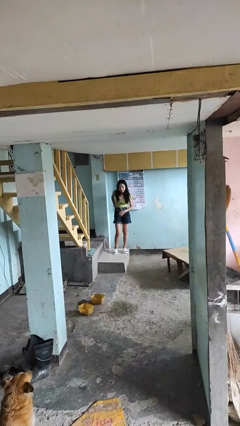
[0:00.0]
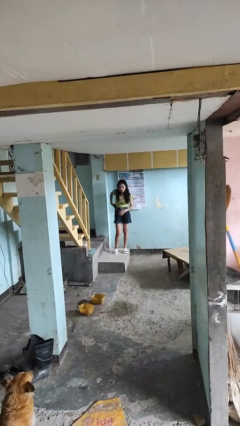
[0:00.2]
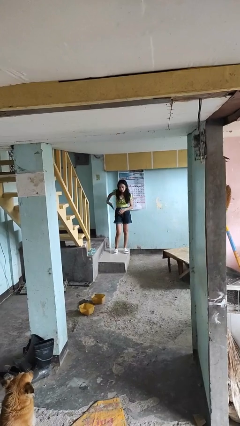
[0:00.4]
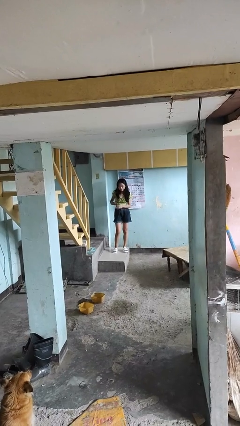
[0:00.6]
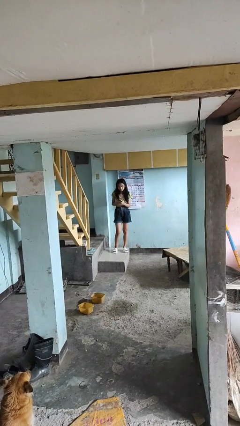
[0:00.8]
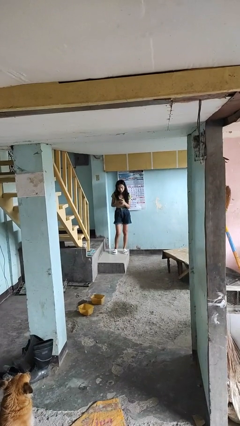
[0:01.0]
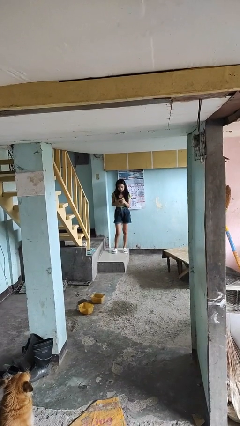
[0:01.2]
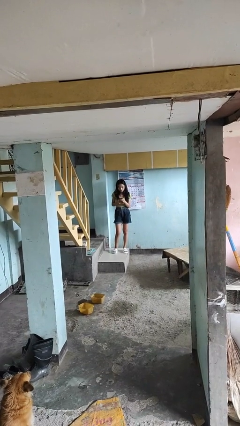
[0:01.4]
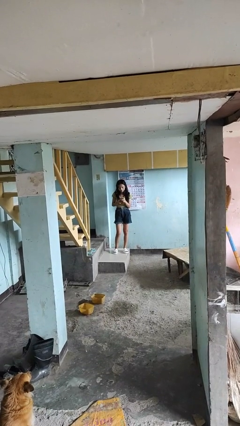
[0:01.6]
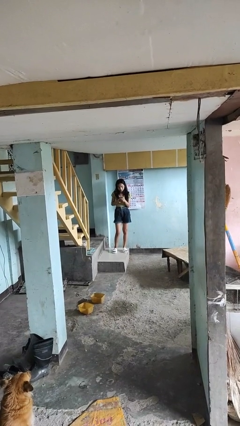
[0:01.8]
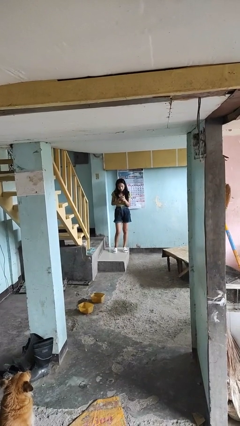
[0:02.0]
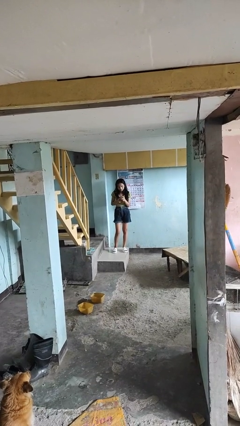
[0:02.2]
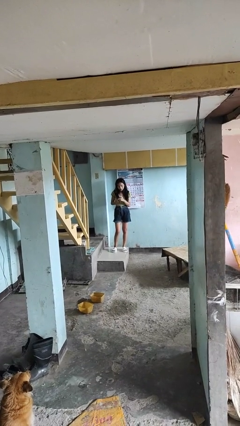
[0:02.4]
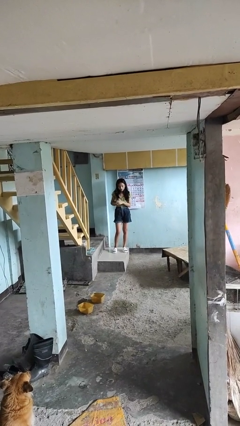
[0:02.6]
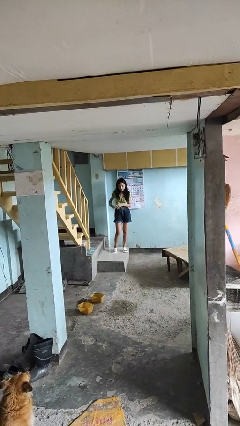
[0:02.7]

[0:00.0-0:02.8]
person takes phone from pocket

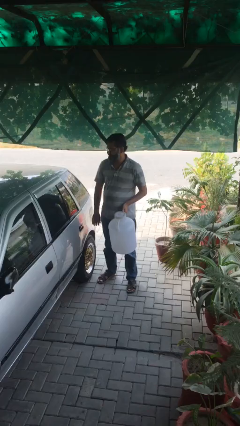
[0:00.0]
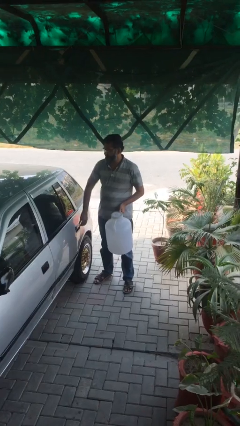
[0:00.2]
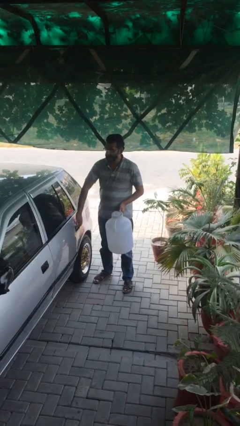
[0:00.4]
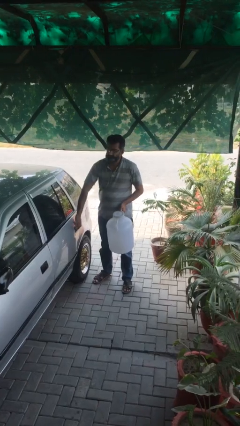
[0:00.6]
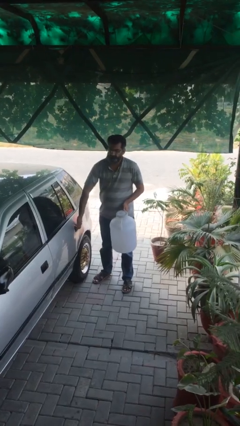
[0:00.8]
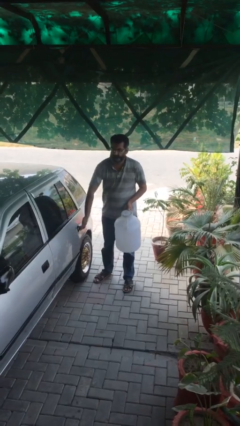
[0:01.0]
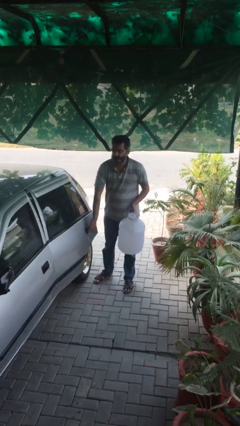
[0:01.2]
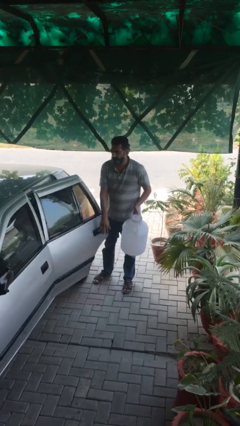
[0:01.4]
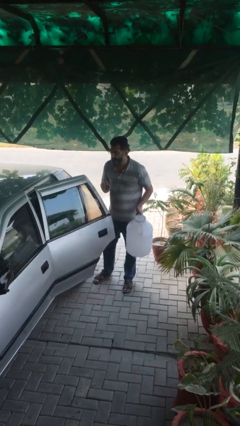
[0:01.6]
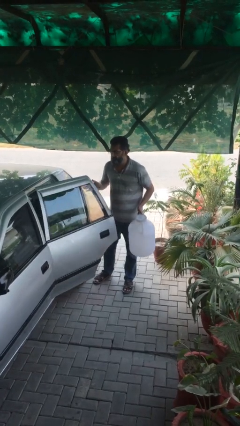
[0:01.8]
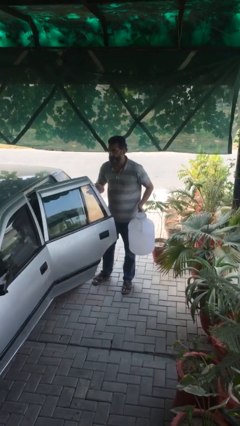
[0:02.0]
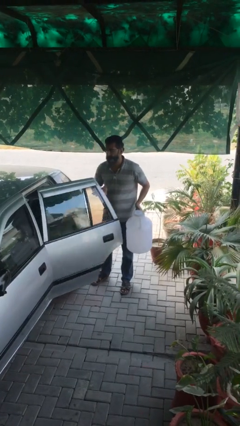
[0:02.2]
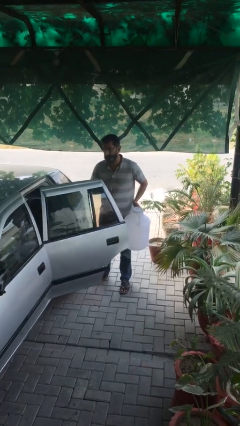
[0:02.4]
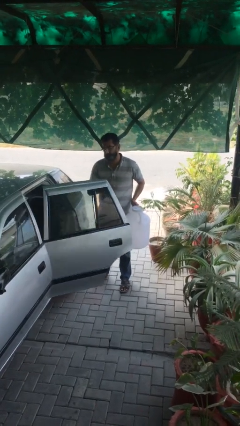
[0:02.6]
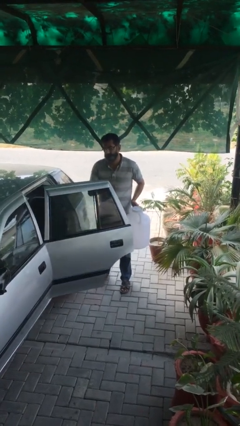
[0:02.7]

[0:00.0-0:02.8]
person opens car door

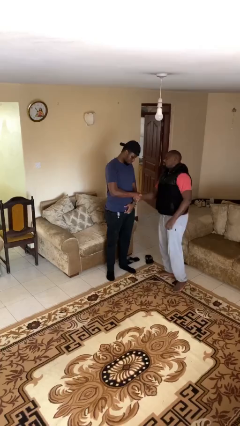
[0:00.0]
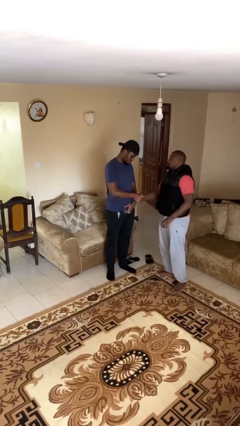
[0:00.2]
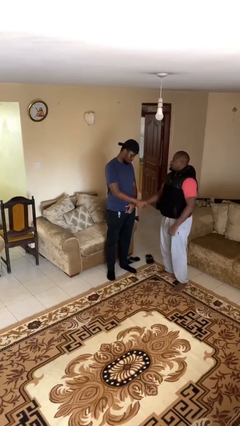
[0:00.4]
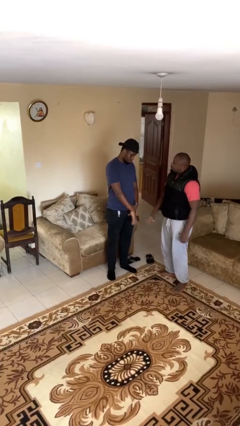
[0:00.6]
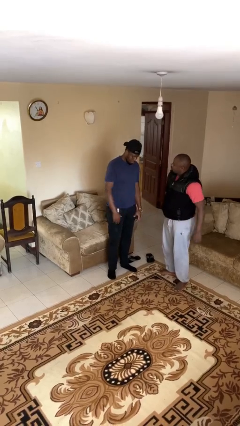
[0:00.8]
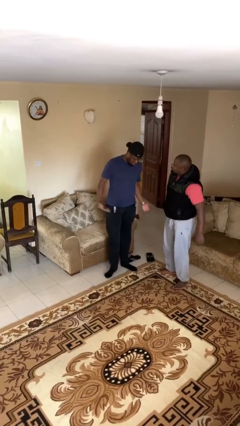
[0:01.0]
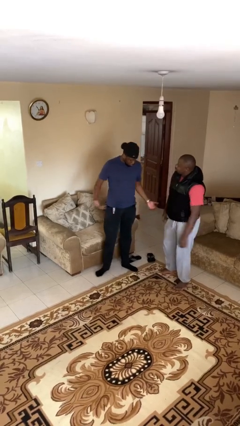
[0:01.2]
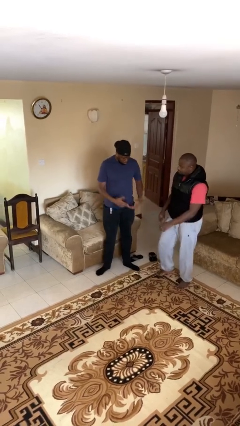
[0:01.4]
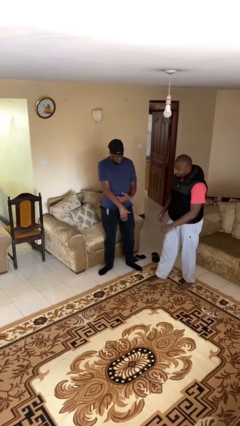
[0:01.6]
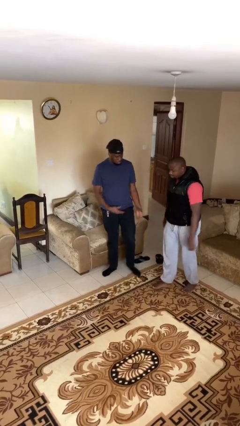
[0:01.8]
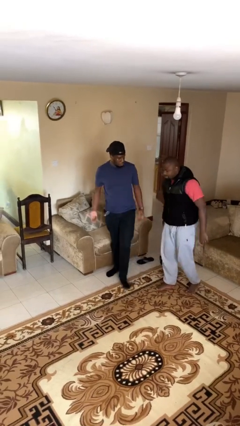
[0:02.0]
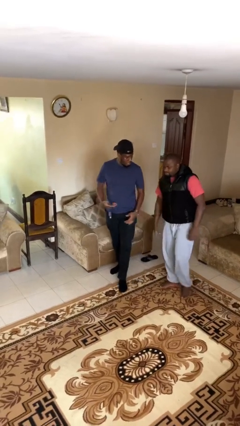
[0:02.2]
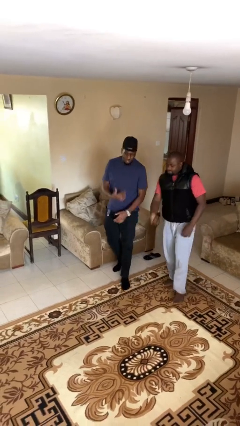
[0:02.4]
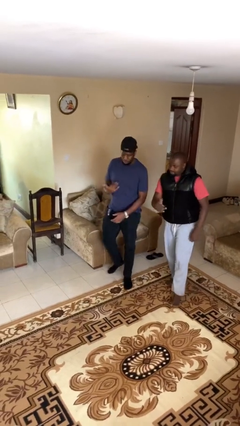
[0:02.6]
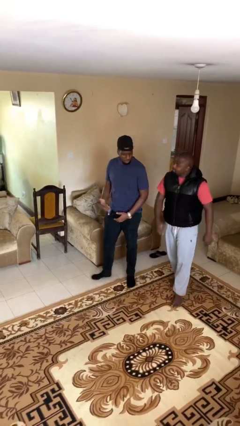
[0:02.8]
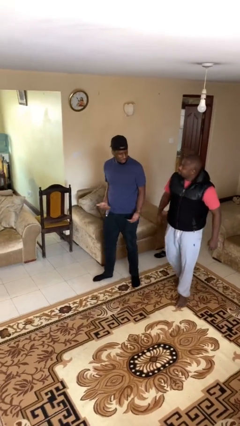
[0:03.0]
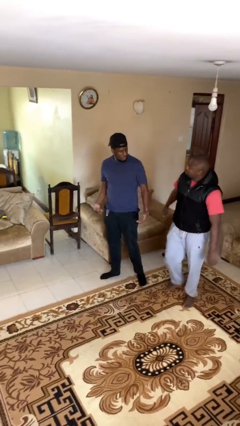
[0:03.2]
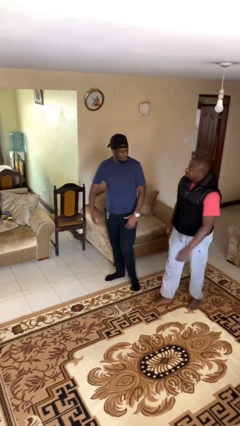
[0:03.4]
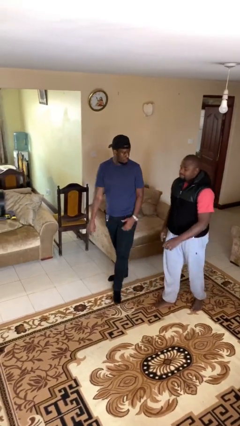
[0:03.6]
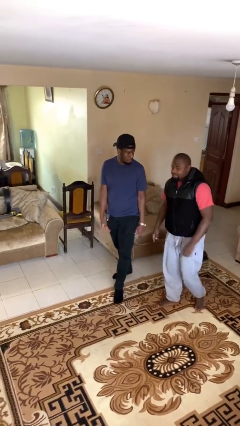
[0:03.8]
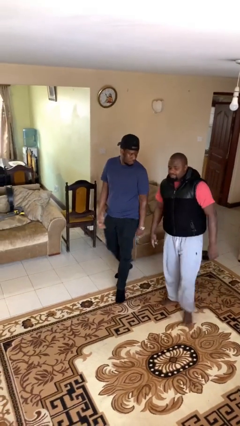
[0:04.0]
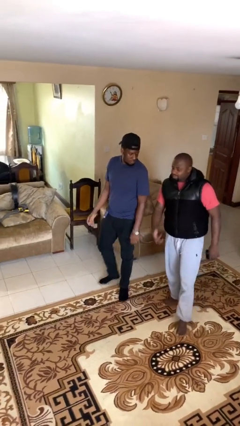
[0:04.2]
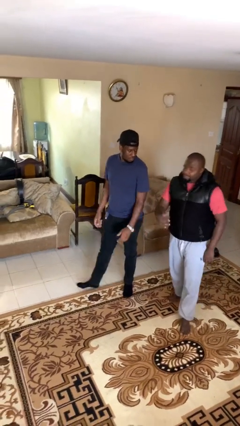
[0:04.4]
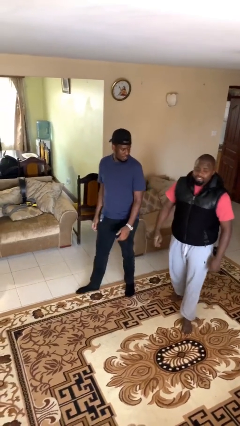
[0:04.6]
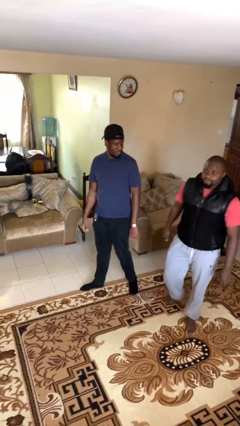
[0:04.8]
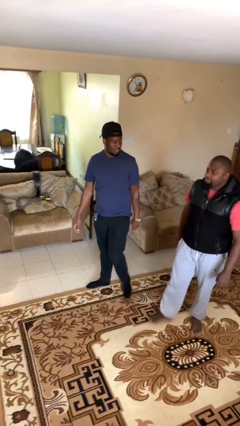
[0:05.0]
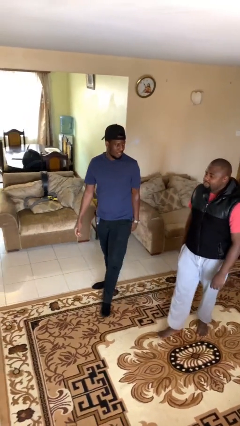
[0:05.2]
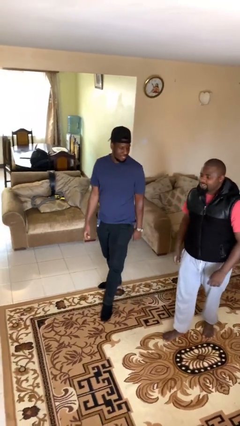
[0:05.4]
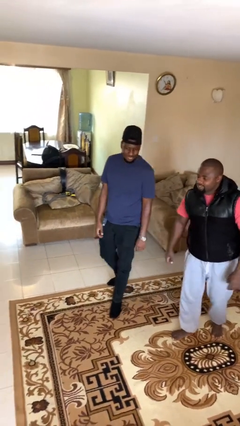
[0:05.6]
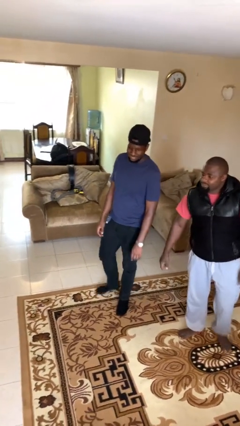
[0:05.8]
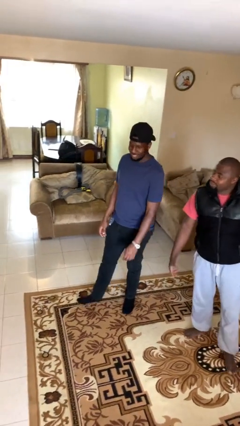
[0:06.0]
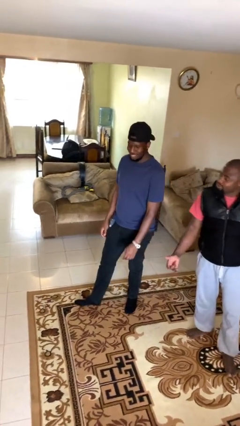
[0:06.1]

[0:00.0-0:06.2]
person talks to person

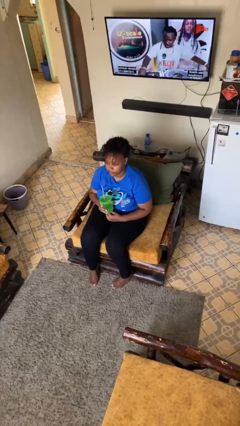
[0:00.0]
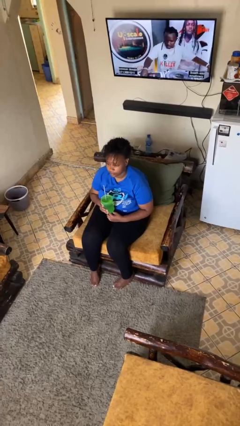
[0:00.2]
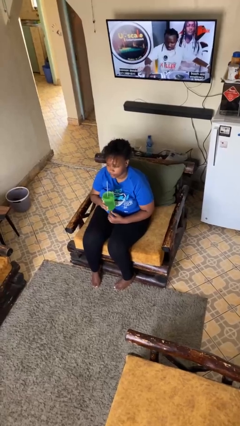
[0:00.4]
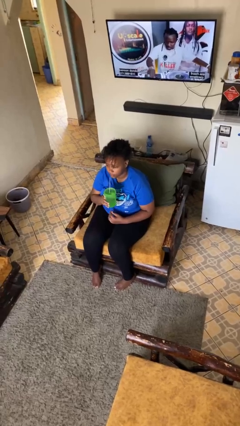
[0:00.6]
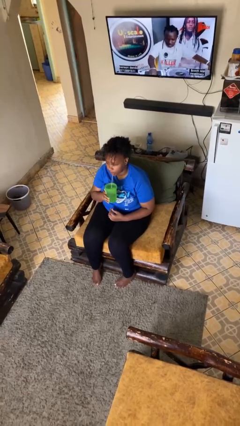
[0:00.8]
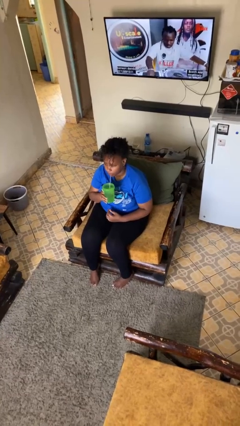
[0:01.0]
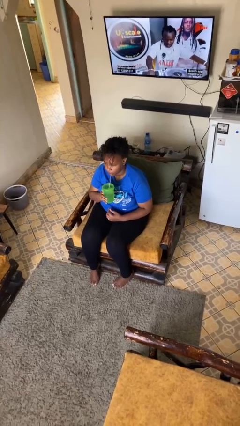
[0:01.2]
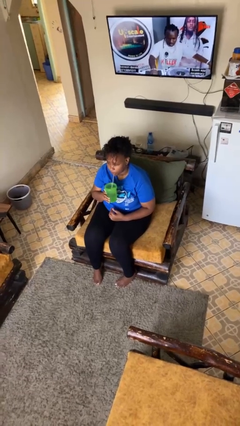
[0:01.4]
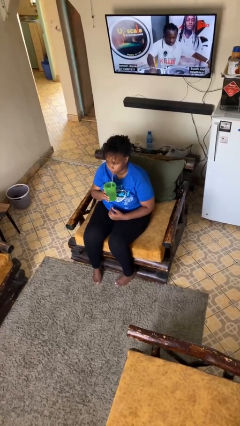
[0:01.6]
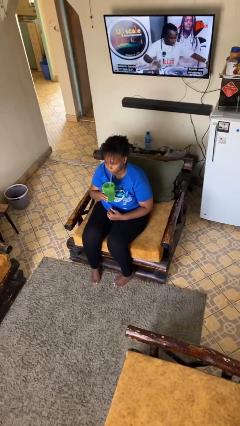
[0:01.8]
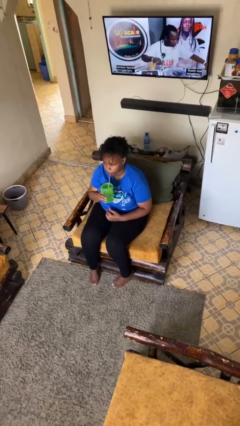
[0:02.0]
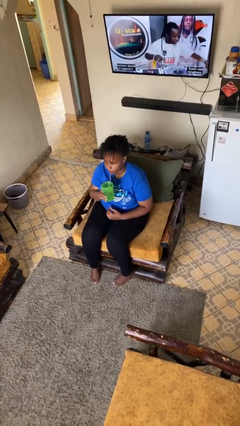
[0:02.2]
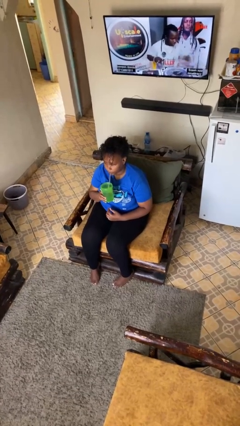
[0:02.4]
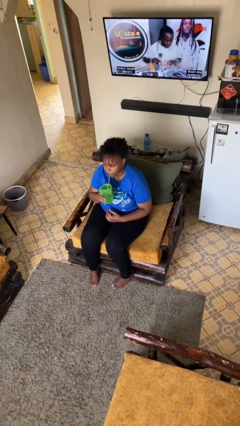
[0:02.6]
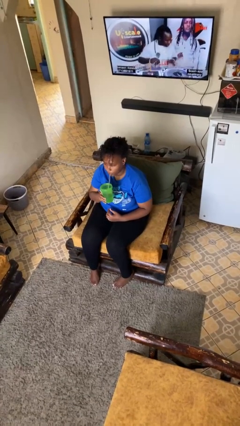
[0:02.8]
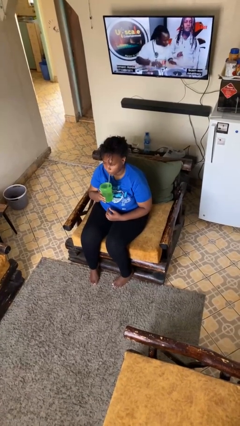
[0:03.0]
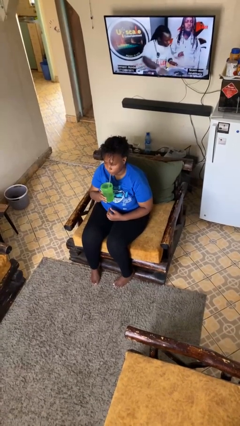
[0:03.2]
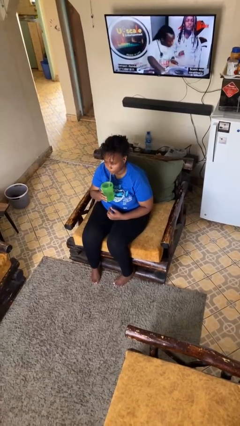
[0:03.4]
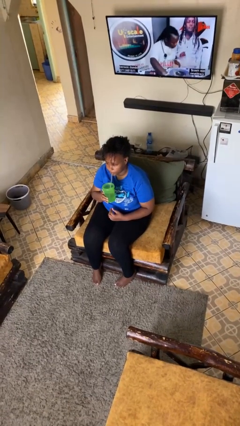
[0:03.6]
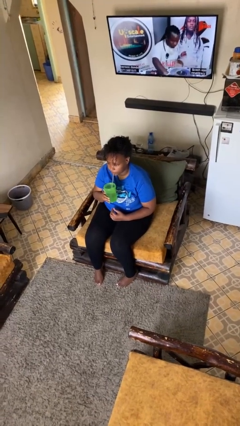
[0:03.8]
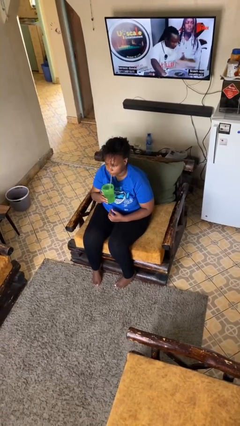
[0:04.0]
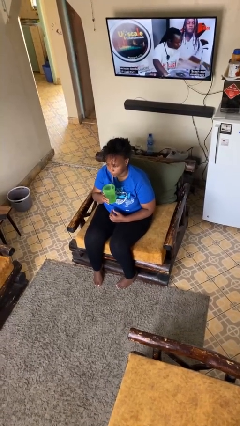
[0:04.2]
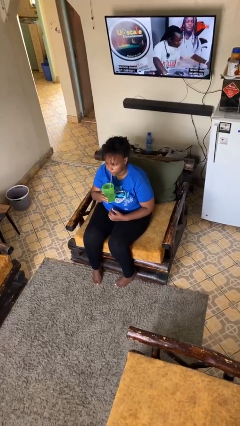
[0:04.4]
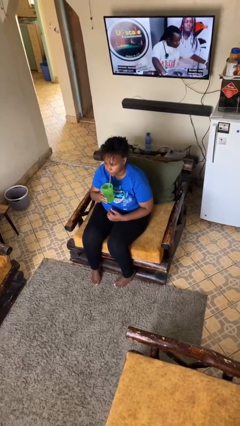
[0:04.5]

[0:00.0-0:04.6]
person drinks from straw

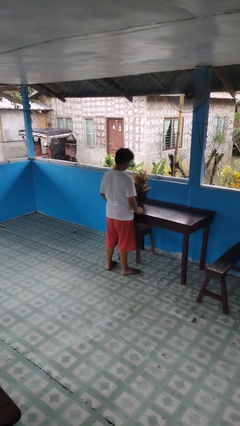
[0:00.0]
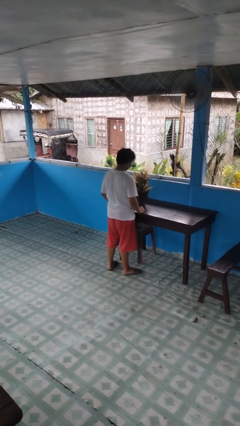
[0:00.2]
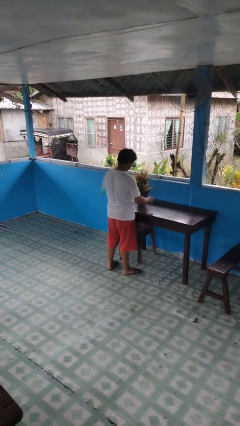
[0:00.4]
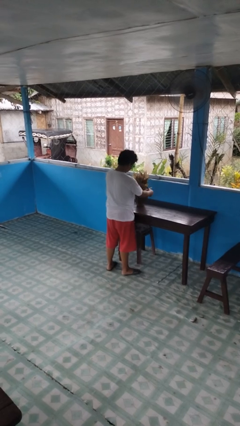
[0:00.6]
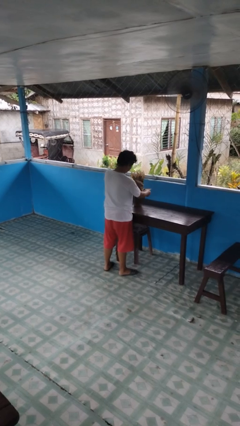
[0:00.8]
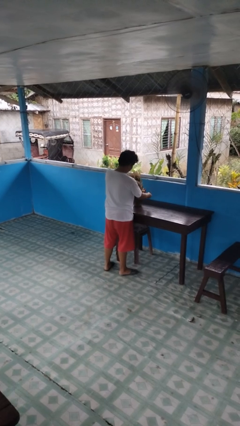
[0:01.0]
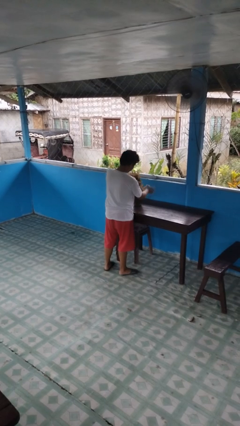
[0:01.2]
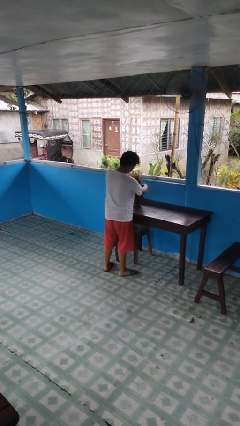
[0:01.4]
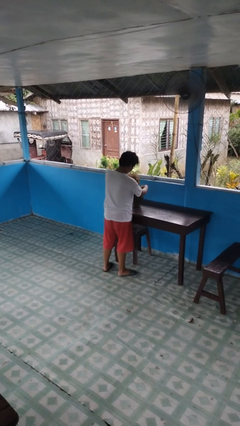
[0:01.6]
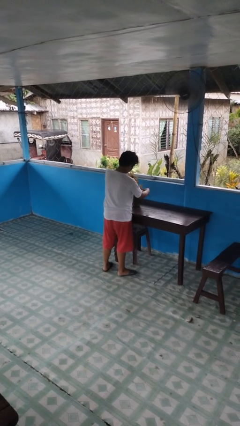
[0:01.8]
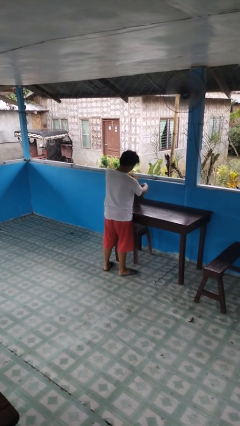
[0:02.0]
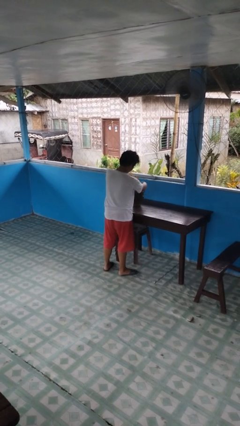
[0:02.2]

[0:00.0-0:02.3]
person arranges flowers in vase
